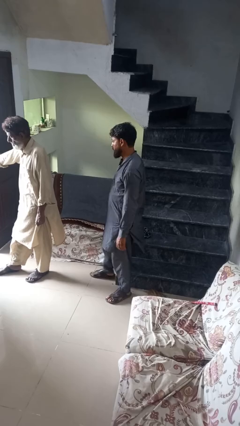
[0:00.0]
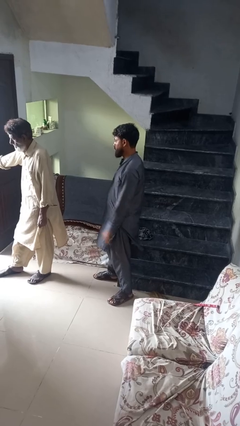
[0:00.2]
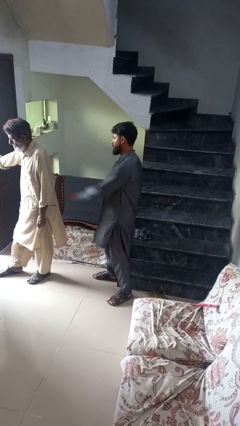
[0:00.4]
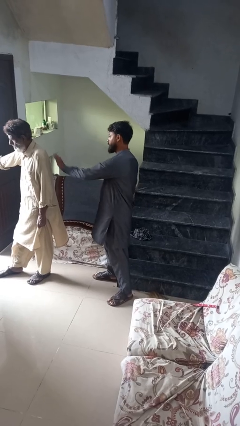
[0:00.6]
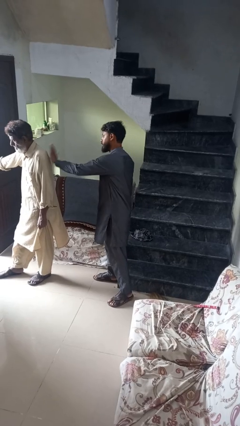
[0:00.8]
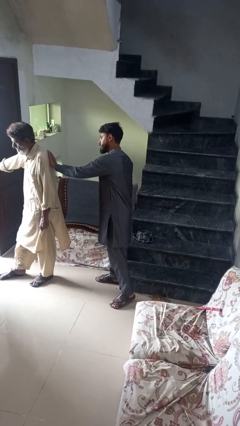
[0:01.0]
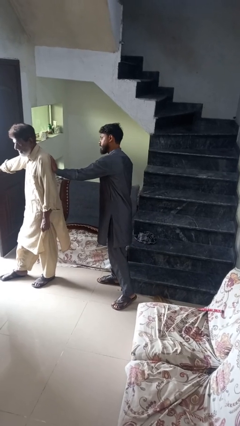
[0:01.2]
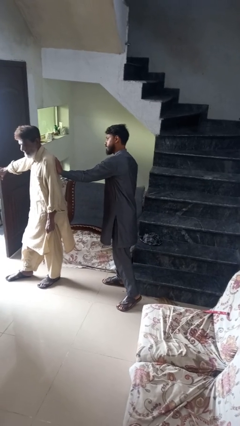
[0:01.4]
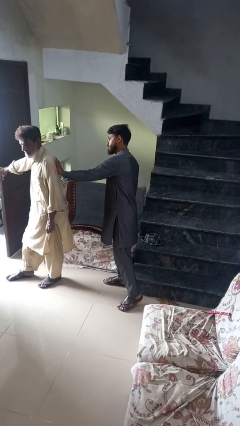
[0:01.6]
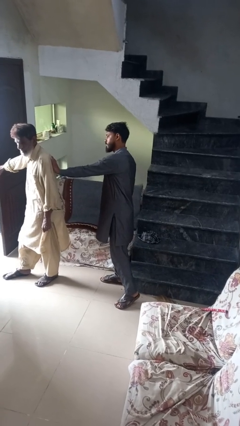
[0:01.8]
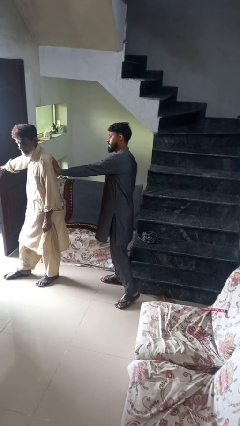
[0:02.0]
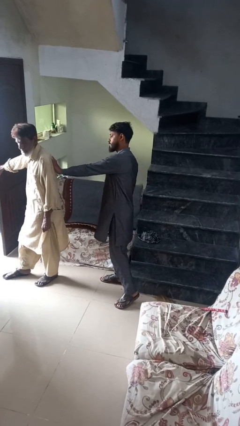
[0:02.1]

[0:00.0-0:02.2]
person touches back of person

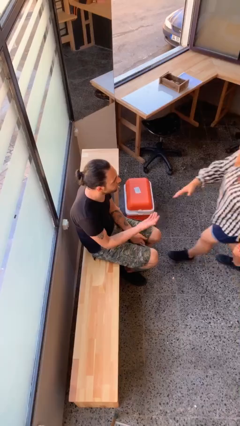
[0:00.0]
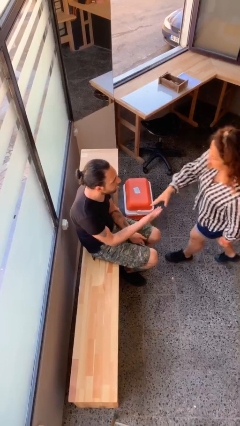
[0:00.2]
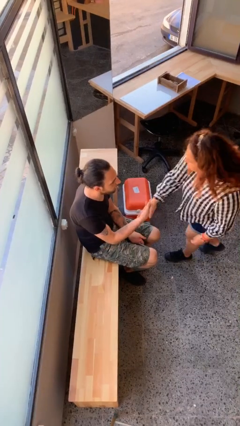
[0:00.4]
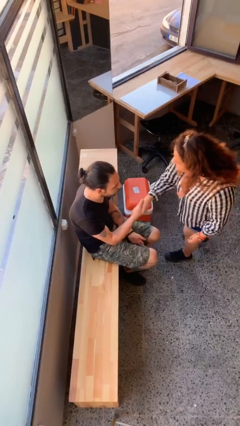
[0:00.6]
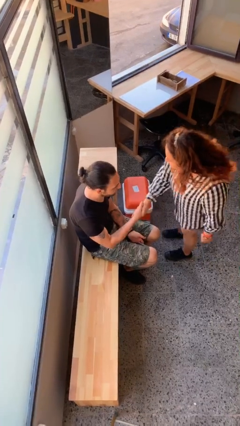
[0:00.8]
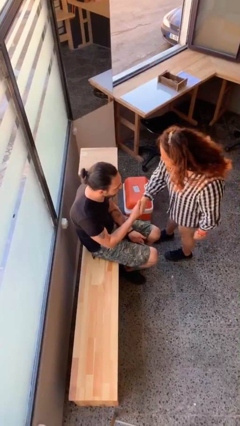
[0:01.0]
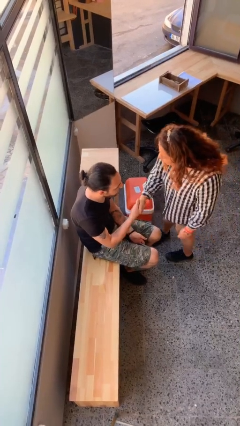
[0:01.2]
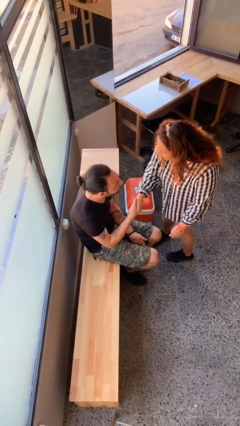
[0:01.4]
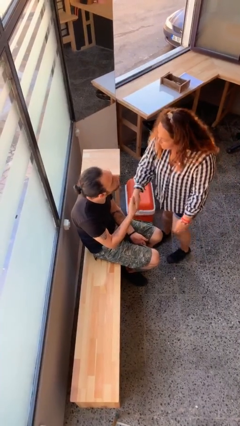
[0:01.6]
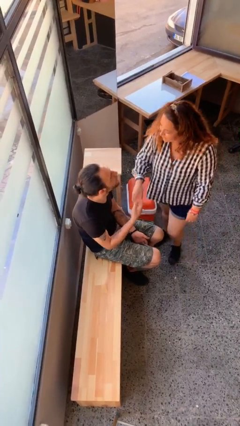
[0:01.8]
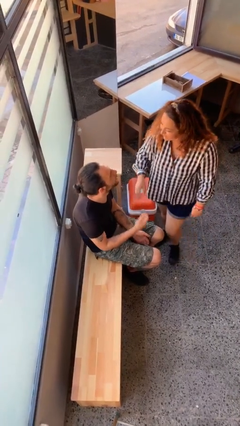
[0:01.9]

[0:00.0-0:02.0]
person shakes hand

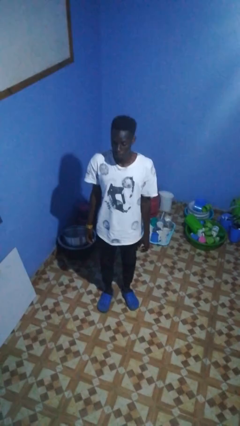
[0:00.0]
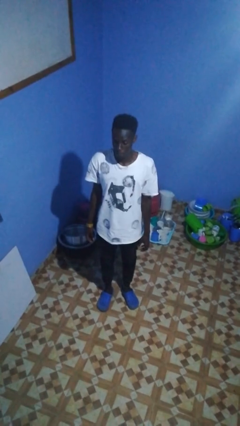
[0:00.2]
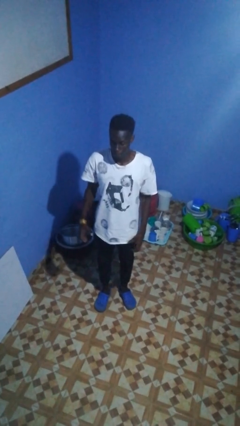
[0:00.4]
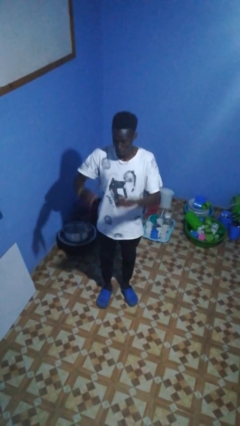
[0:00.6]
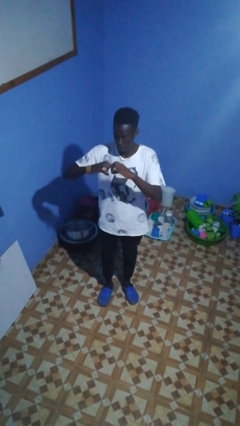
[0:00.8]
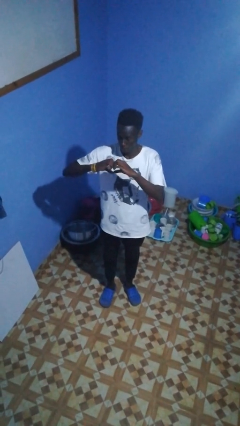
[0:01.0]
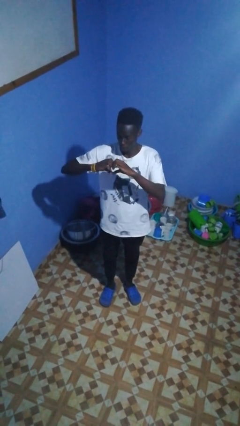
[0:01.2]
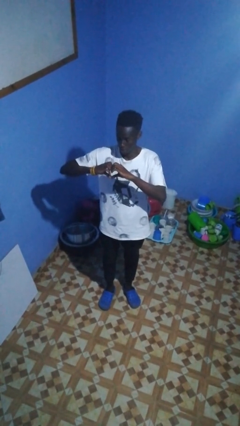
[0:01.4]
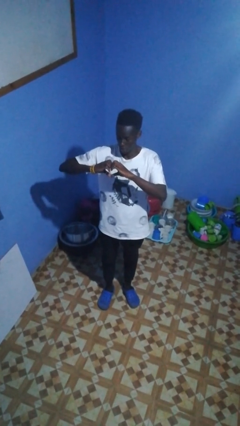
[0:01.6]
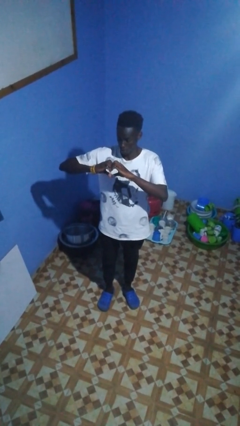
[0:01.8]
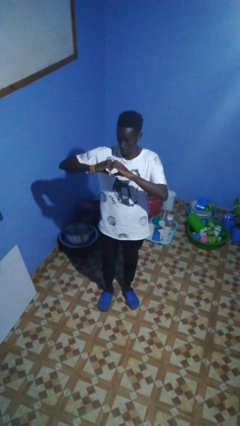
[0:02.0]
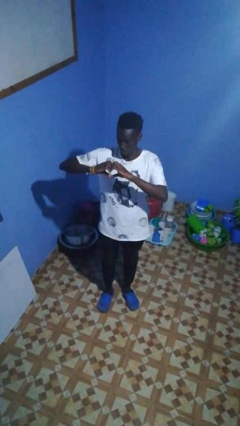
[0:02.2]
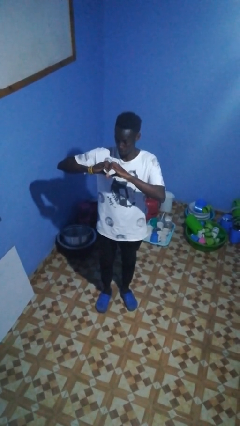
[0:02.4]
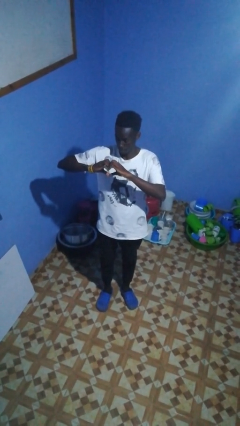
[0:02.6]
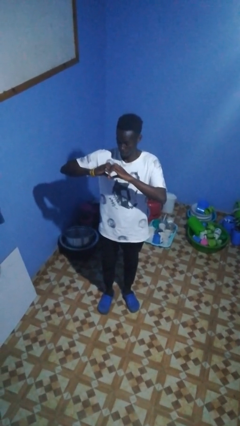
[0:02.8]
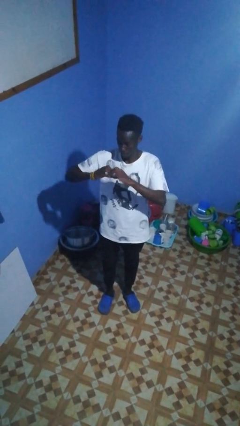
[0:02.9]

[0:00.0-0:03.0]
person gestures heart

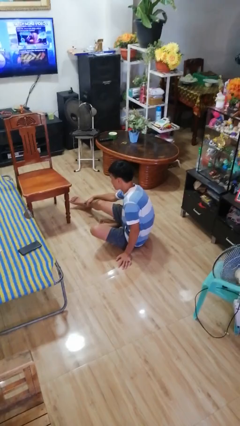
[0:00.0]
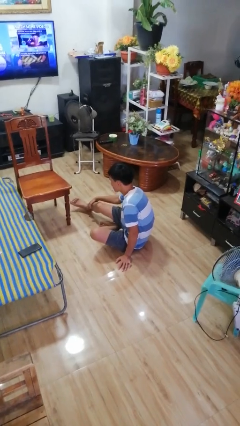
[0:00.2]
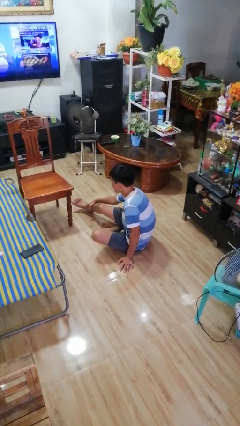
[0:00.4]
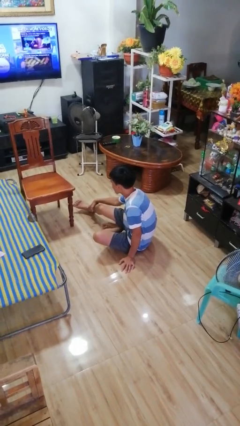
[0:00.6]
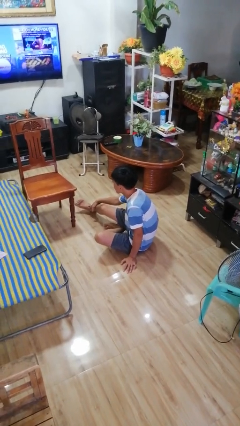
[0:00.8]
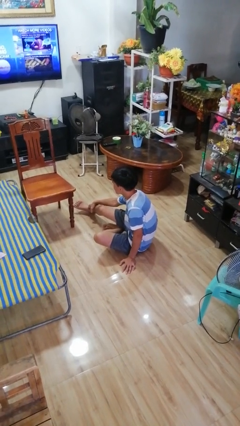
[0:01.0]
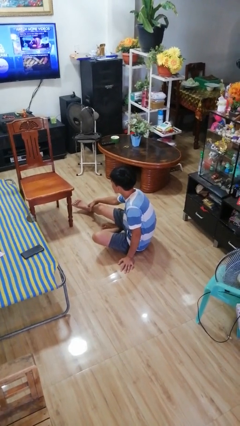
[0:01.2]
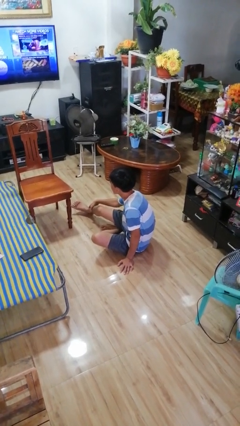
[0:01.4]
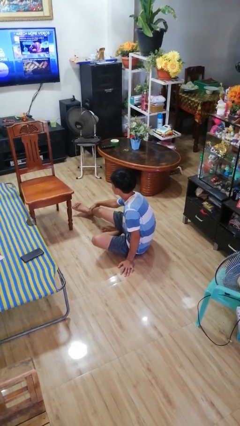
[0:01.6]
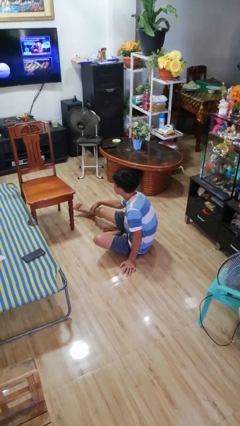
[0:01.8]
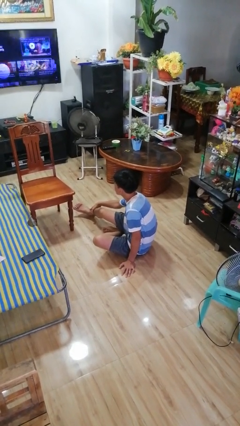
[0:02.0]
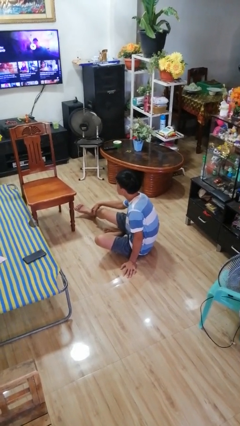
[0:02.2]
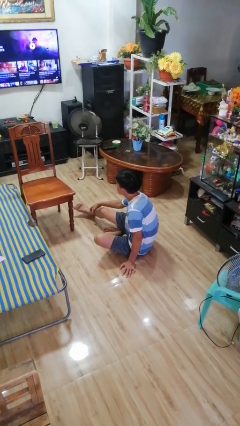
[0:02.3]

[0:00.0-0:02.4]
person lies down on floor

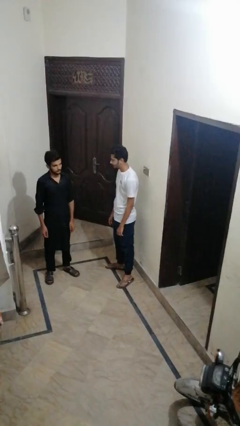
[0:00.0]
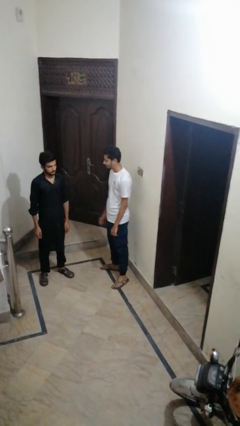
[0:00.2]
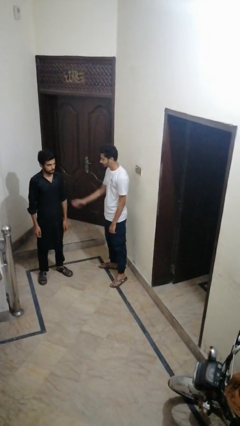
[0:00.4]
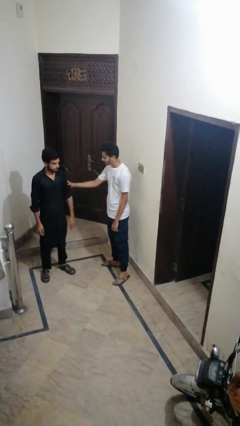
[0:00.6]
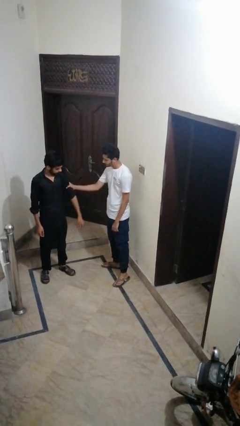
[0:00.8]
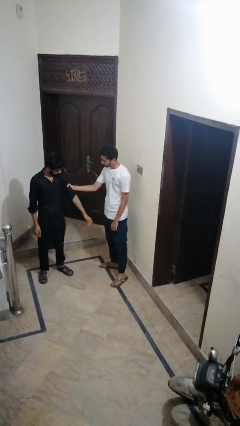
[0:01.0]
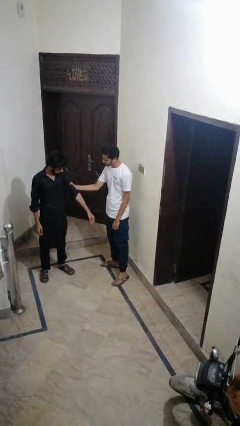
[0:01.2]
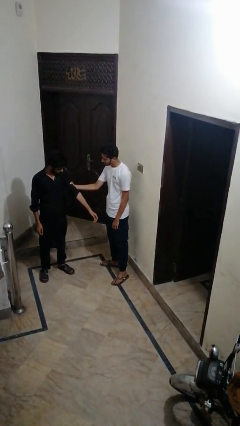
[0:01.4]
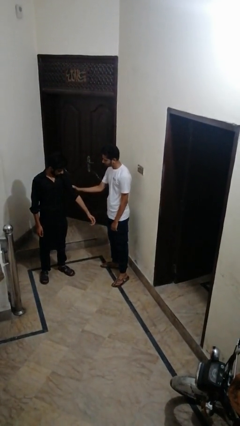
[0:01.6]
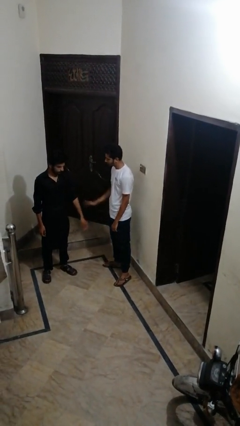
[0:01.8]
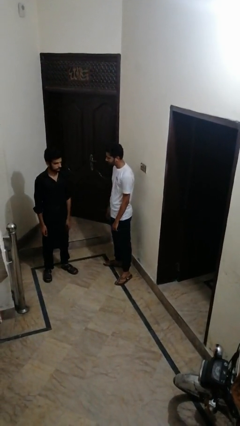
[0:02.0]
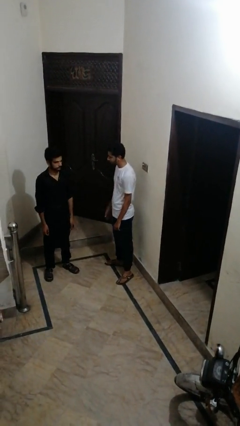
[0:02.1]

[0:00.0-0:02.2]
person grabs person by bicep

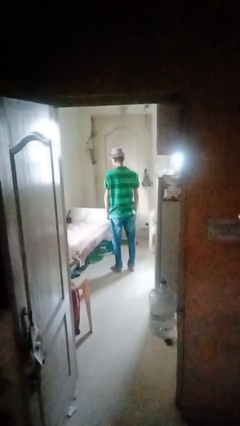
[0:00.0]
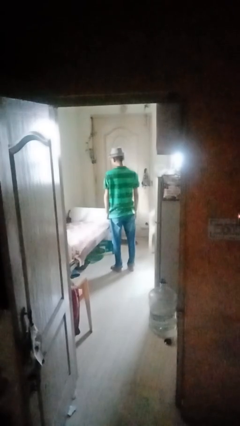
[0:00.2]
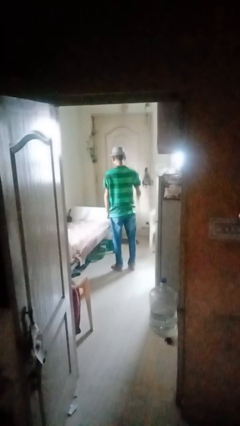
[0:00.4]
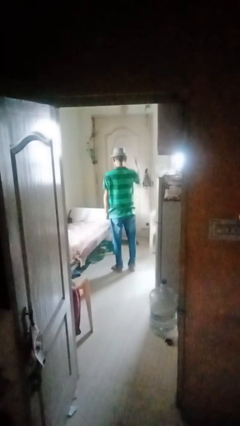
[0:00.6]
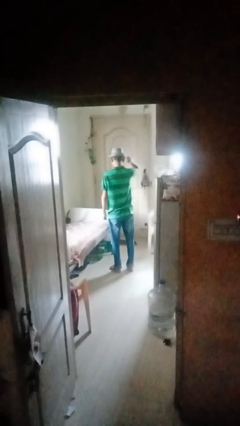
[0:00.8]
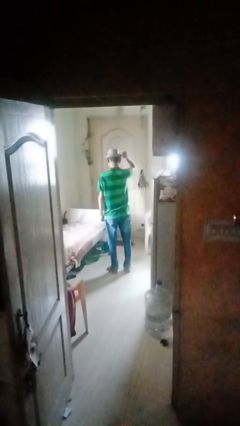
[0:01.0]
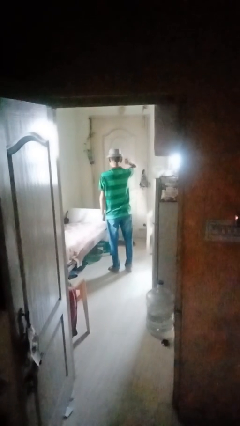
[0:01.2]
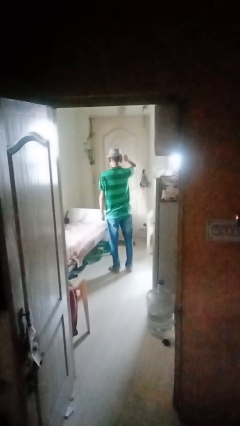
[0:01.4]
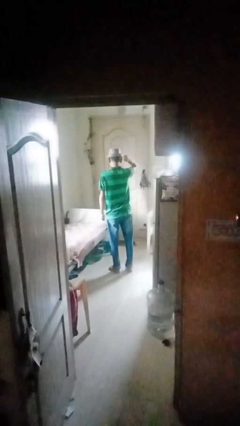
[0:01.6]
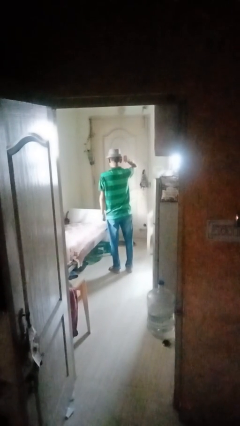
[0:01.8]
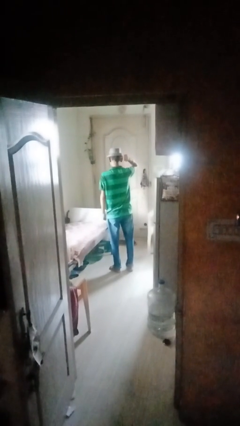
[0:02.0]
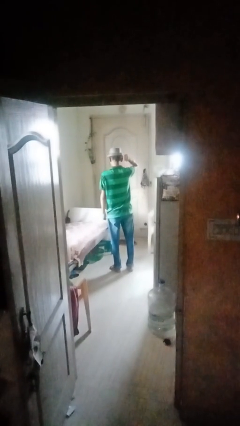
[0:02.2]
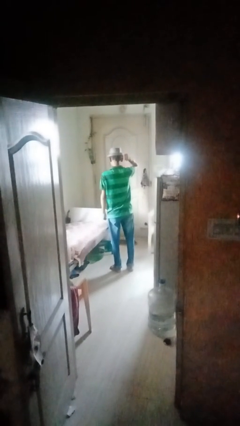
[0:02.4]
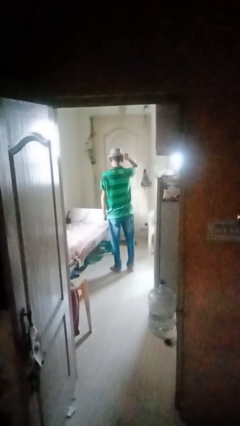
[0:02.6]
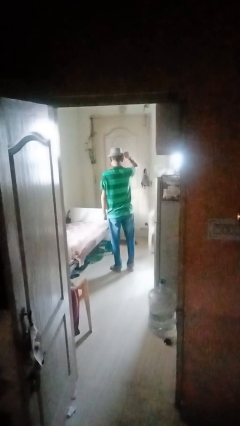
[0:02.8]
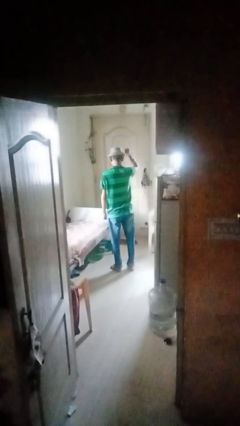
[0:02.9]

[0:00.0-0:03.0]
person gestures behind me

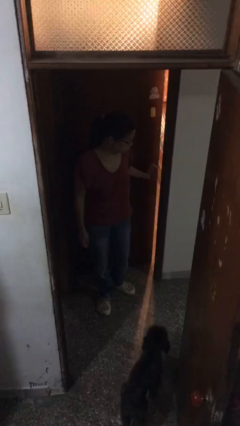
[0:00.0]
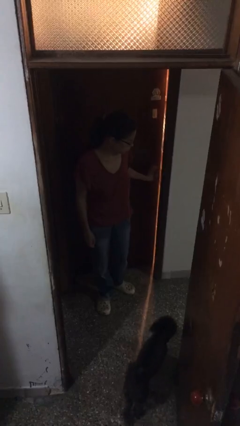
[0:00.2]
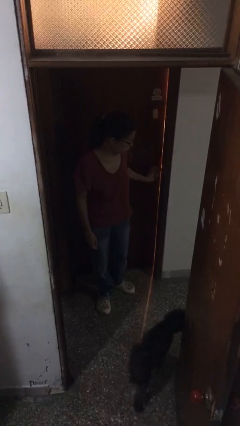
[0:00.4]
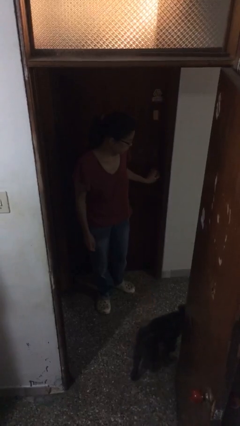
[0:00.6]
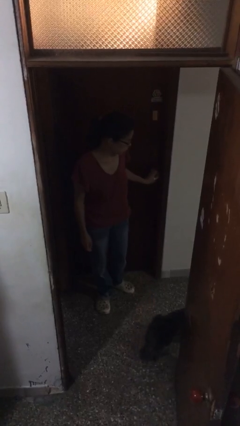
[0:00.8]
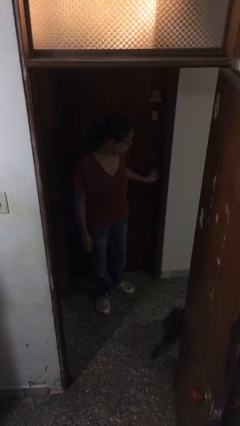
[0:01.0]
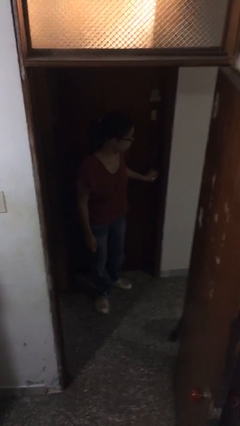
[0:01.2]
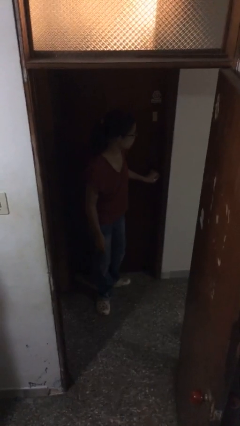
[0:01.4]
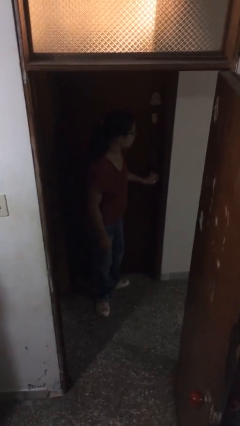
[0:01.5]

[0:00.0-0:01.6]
person closes facility door

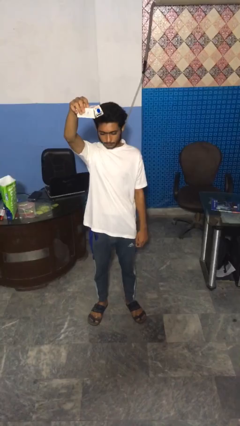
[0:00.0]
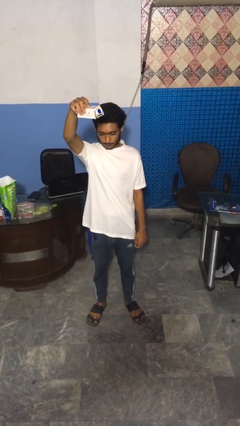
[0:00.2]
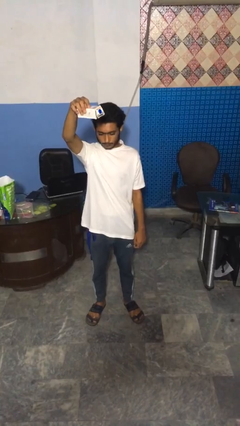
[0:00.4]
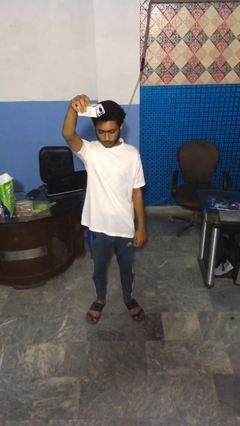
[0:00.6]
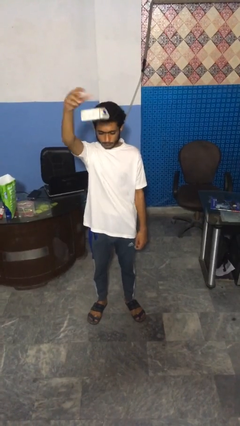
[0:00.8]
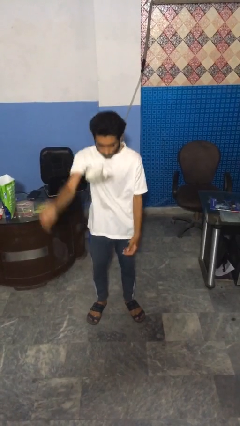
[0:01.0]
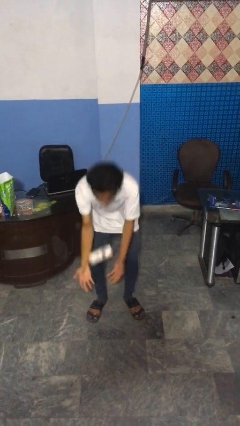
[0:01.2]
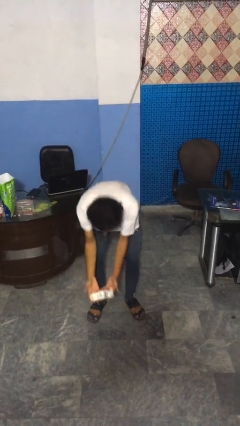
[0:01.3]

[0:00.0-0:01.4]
person drops object
